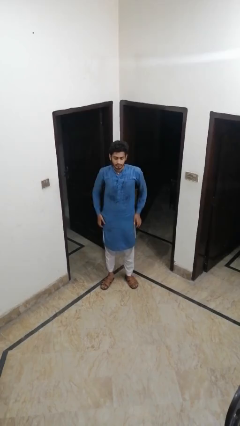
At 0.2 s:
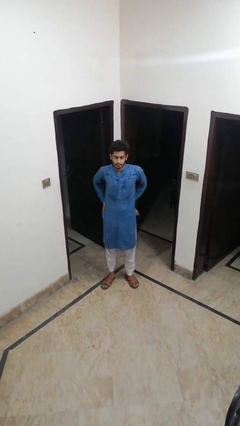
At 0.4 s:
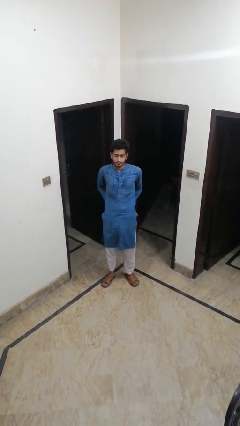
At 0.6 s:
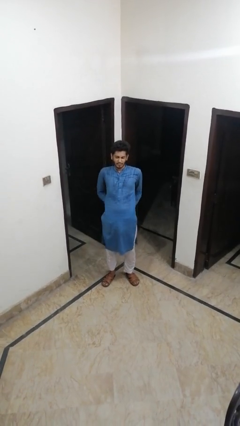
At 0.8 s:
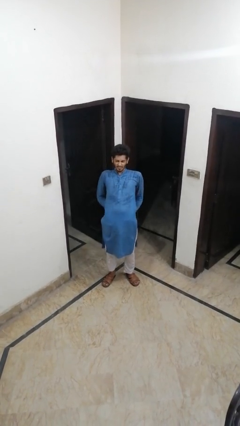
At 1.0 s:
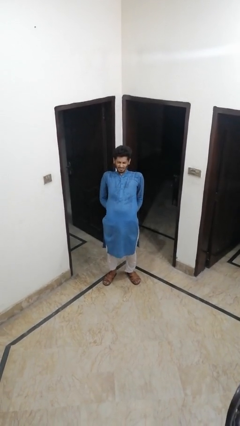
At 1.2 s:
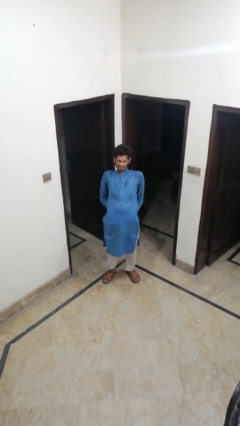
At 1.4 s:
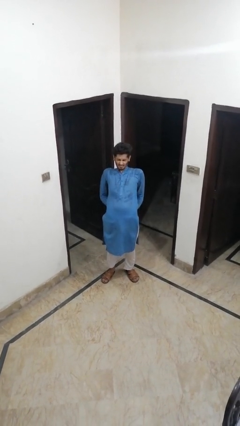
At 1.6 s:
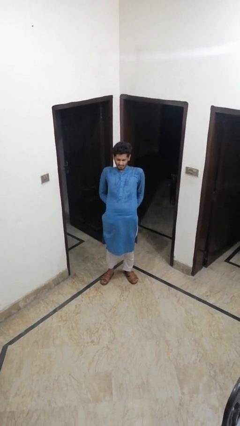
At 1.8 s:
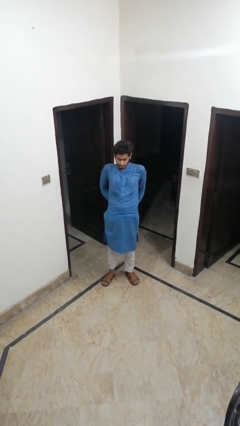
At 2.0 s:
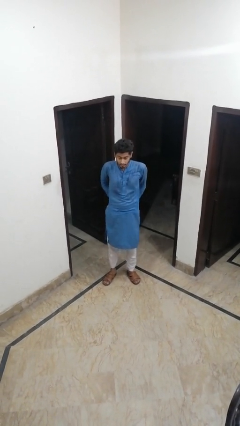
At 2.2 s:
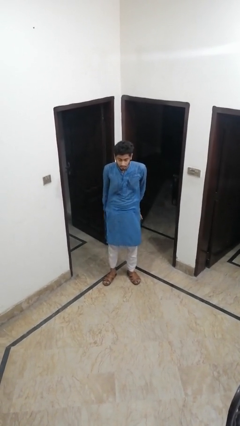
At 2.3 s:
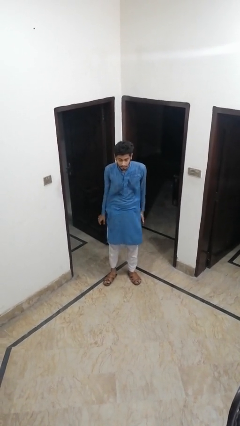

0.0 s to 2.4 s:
person stretches back

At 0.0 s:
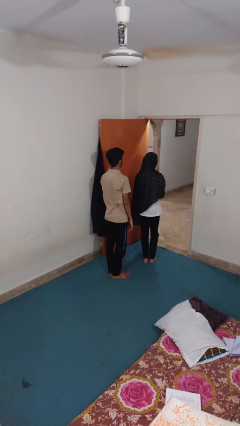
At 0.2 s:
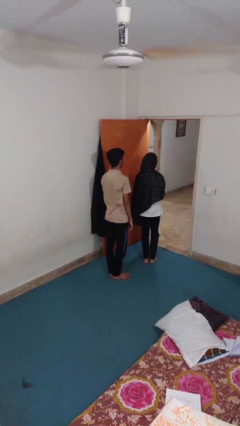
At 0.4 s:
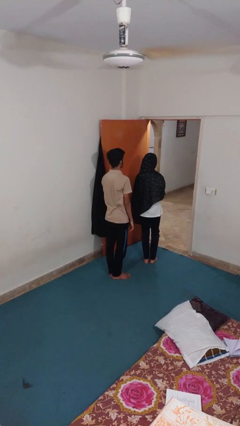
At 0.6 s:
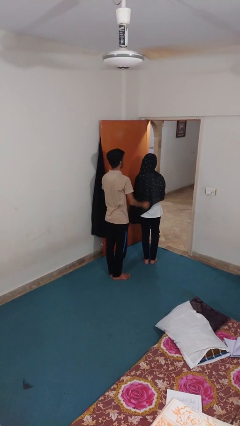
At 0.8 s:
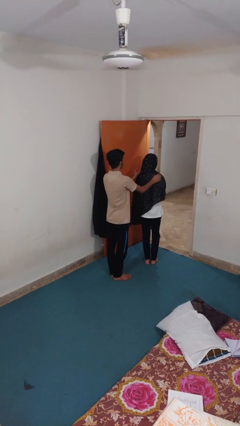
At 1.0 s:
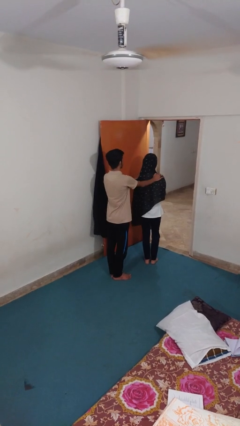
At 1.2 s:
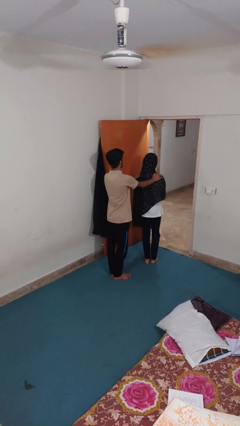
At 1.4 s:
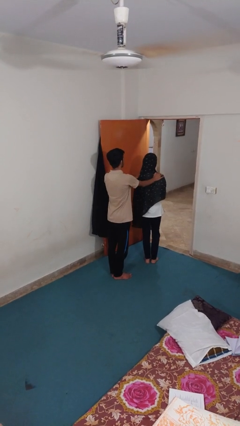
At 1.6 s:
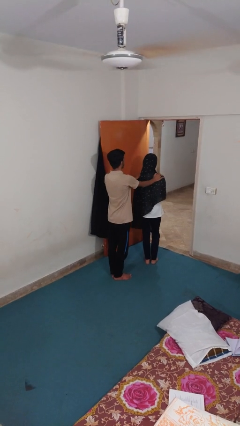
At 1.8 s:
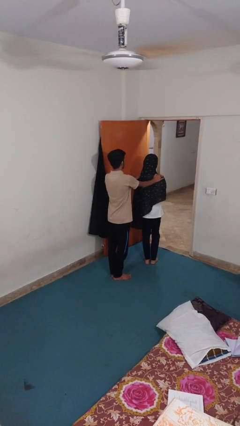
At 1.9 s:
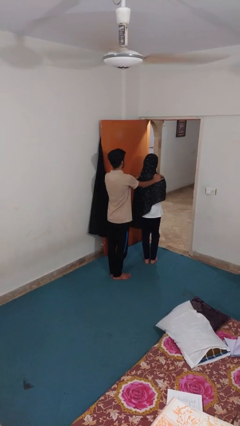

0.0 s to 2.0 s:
person grabs person by shoulder

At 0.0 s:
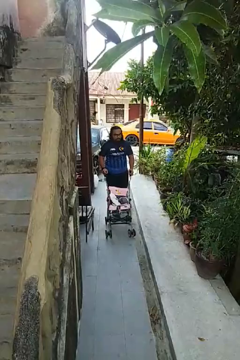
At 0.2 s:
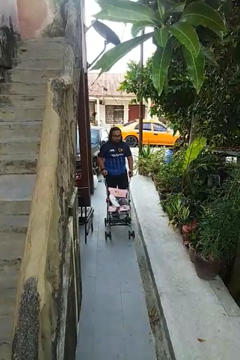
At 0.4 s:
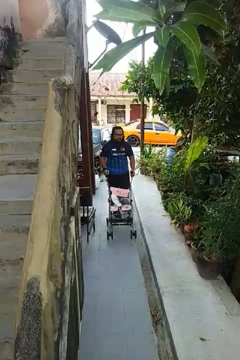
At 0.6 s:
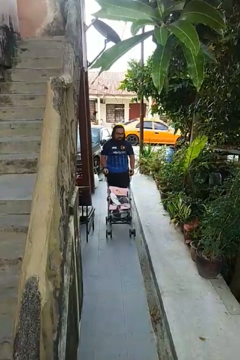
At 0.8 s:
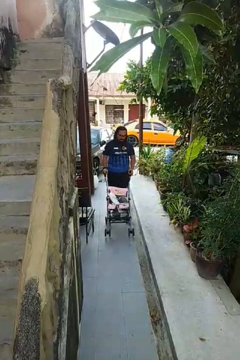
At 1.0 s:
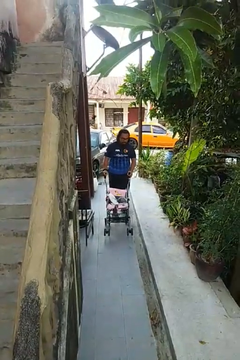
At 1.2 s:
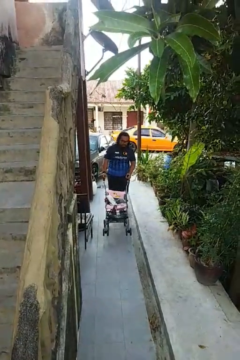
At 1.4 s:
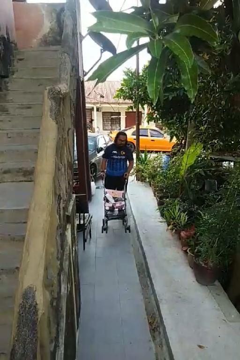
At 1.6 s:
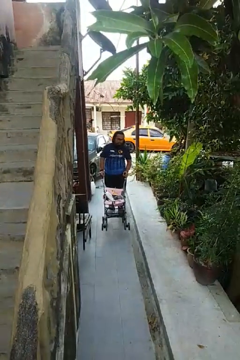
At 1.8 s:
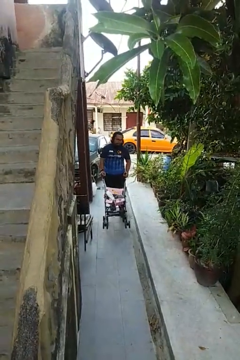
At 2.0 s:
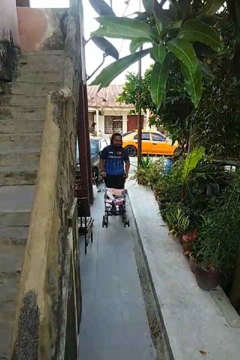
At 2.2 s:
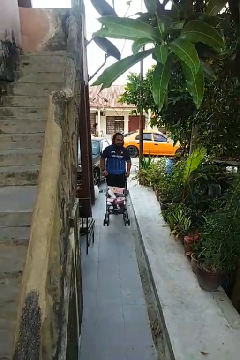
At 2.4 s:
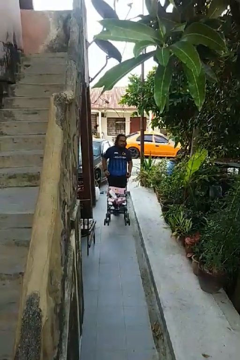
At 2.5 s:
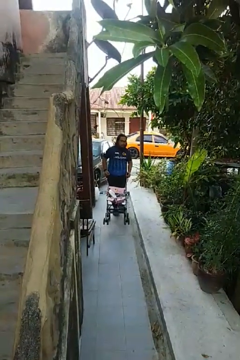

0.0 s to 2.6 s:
person pulls wheeled cart

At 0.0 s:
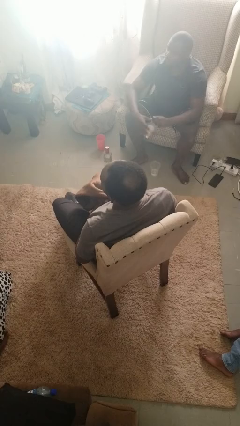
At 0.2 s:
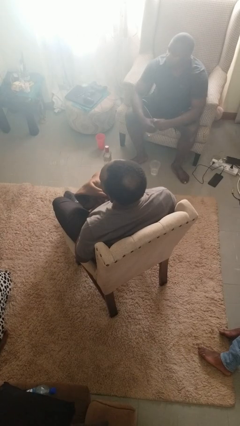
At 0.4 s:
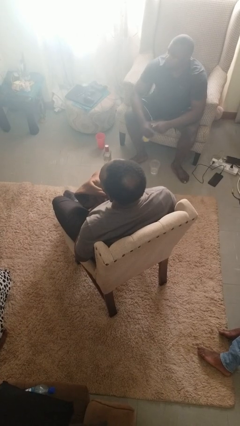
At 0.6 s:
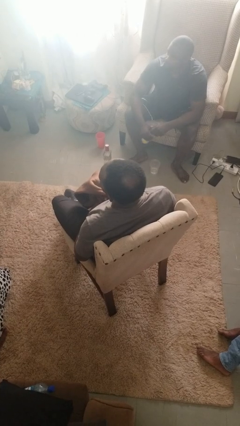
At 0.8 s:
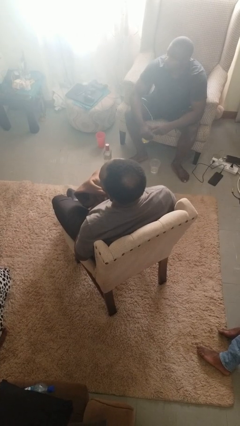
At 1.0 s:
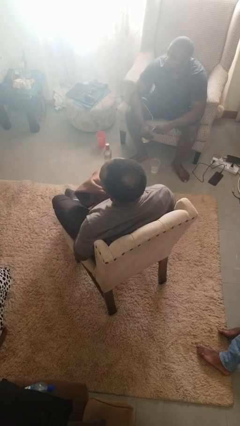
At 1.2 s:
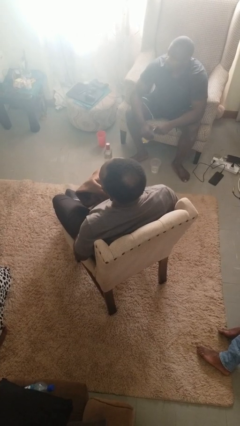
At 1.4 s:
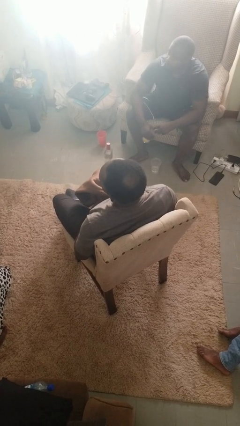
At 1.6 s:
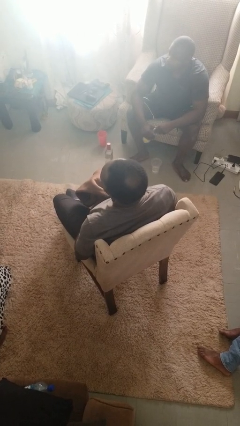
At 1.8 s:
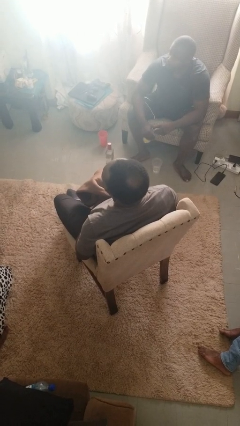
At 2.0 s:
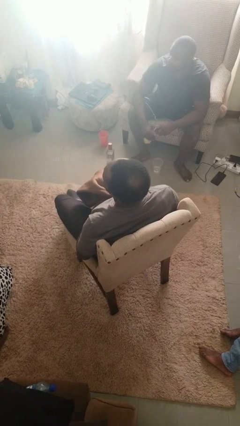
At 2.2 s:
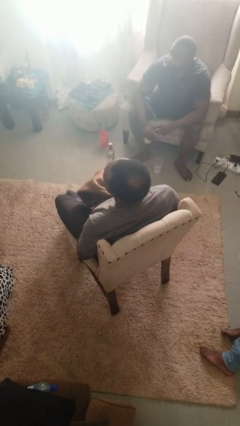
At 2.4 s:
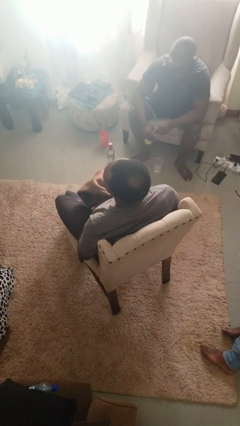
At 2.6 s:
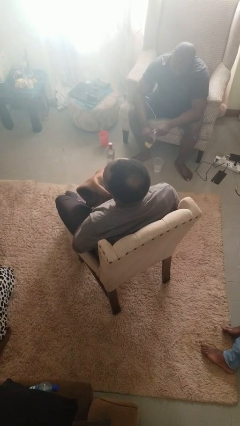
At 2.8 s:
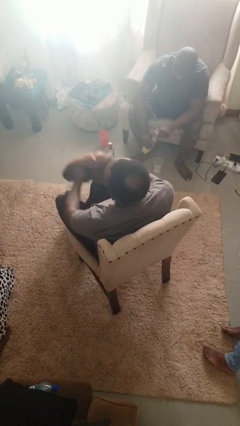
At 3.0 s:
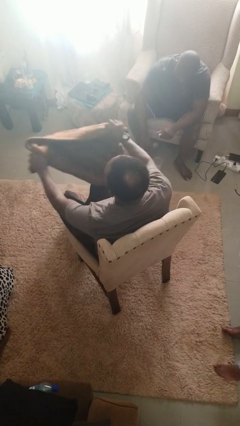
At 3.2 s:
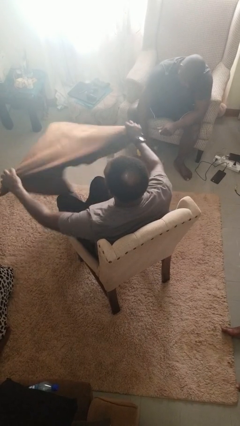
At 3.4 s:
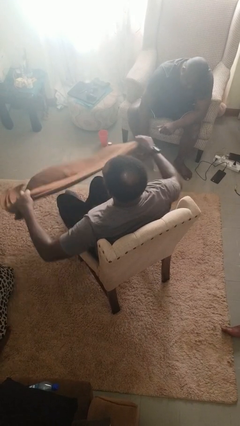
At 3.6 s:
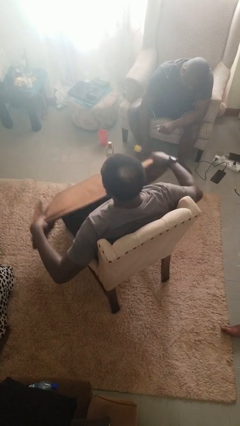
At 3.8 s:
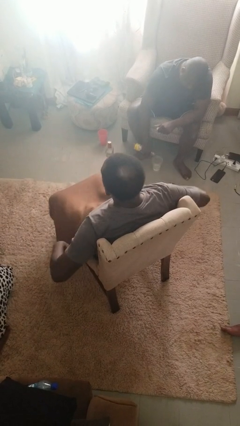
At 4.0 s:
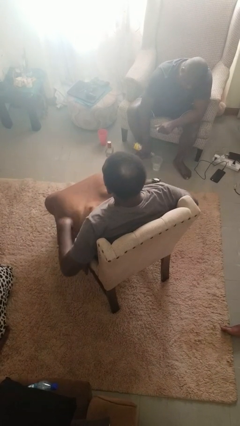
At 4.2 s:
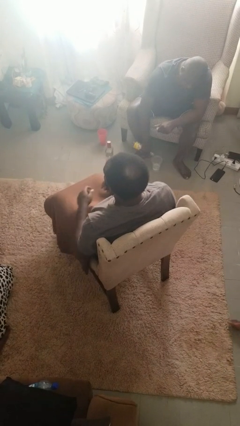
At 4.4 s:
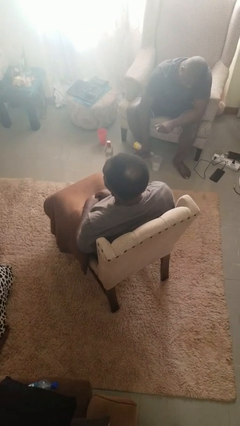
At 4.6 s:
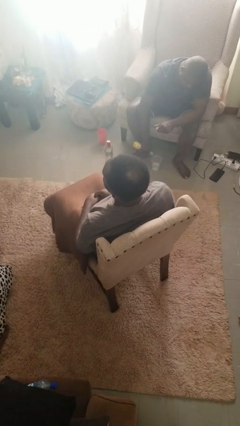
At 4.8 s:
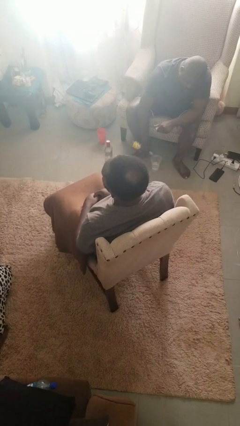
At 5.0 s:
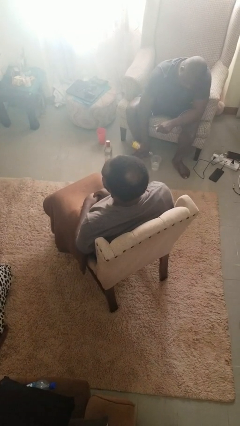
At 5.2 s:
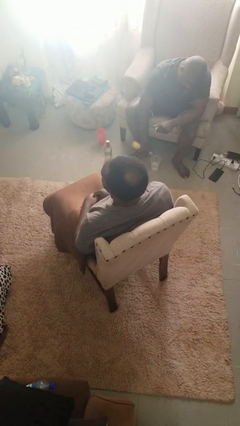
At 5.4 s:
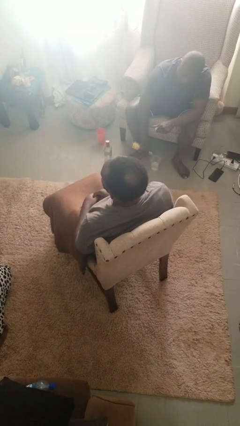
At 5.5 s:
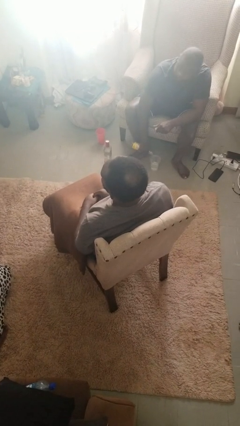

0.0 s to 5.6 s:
person covers with blanket

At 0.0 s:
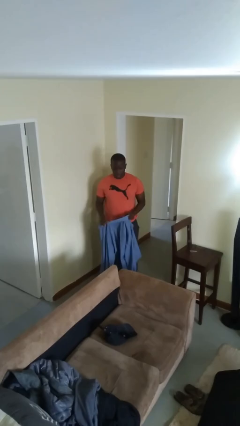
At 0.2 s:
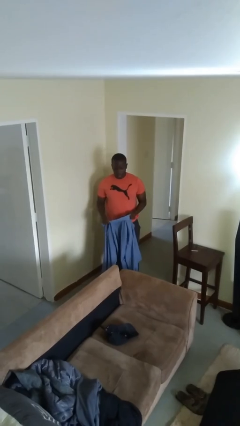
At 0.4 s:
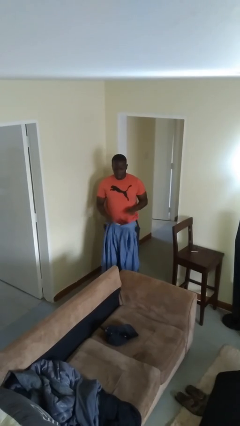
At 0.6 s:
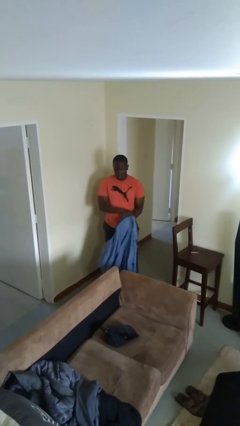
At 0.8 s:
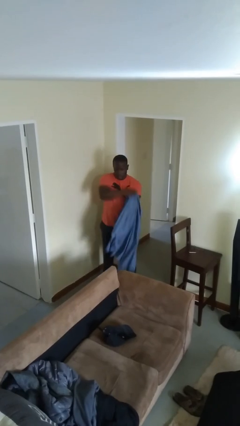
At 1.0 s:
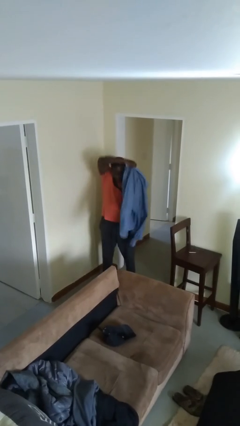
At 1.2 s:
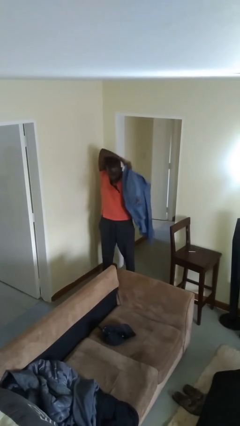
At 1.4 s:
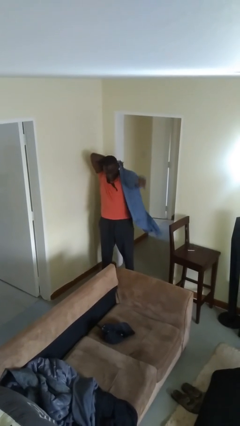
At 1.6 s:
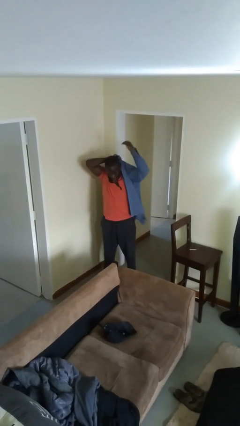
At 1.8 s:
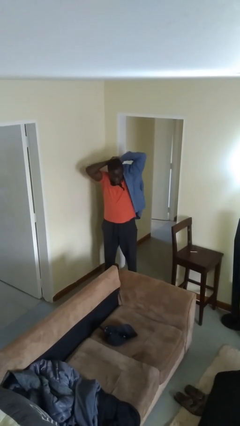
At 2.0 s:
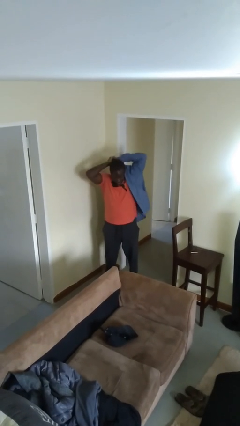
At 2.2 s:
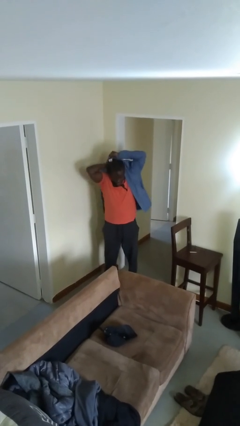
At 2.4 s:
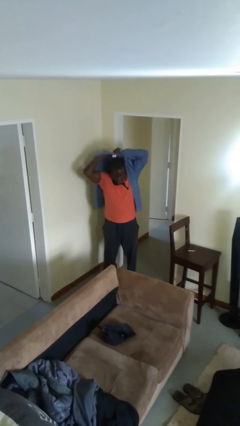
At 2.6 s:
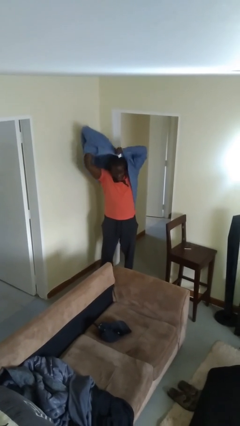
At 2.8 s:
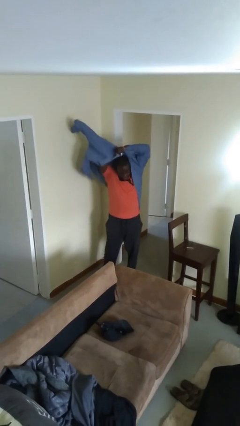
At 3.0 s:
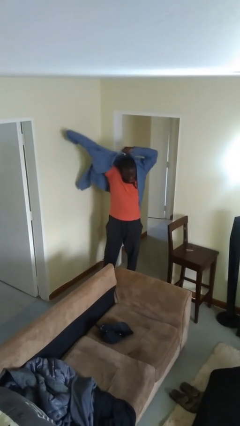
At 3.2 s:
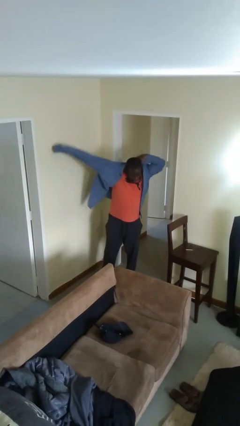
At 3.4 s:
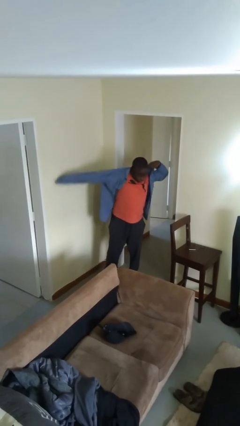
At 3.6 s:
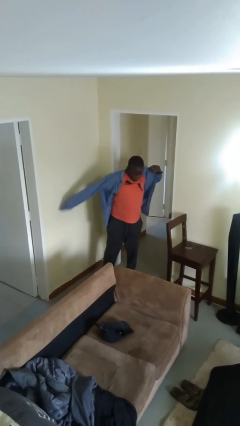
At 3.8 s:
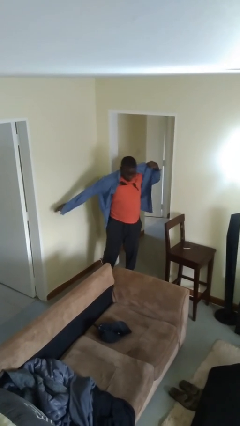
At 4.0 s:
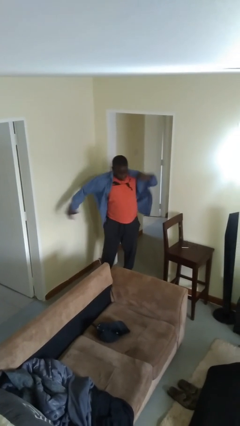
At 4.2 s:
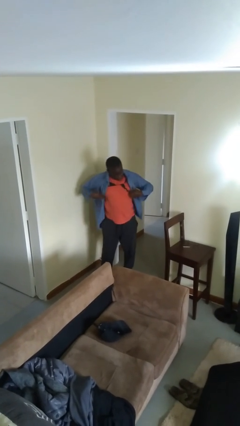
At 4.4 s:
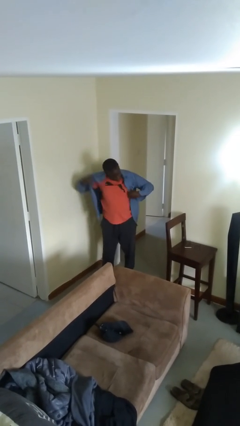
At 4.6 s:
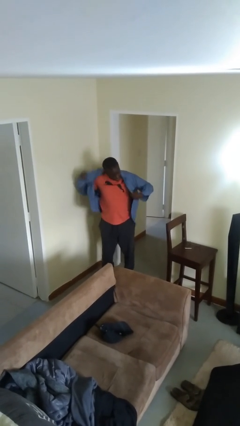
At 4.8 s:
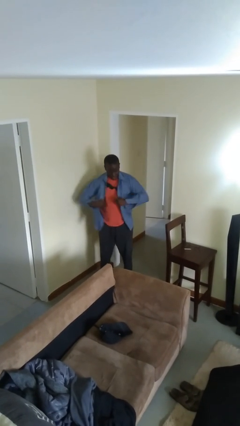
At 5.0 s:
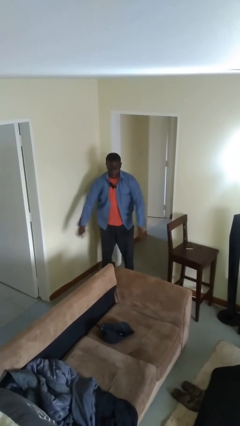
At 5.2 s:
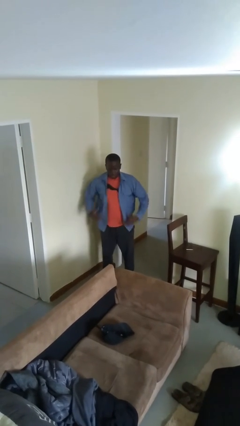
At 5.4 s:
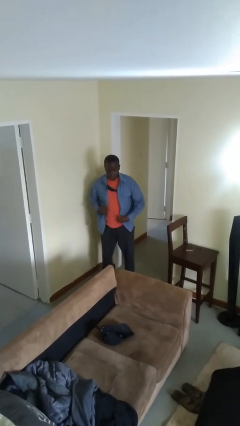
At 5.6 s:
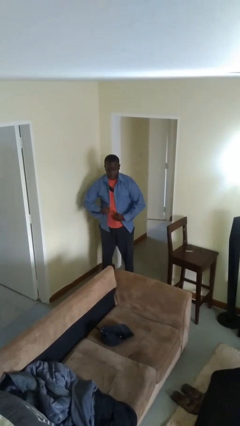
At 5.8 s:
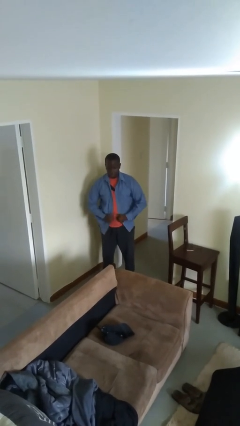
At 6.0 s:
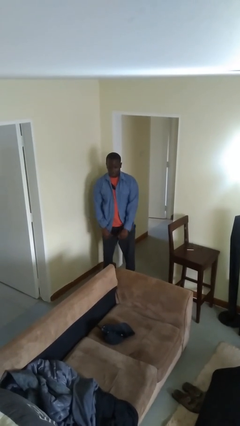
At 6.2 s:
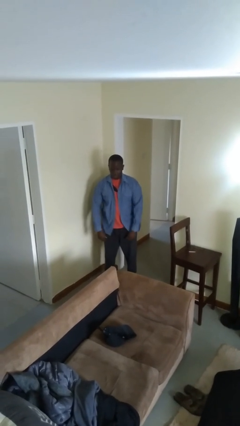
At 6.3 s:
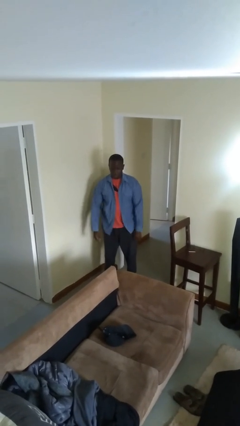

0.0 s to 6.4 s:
person puts on shirt
